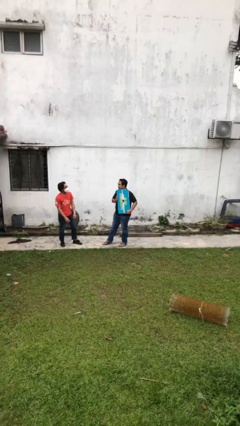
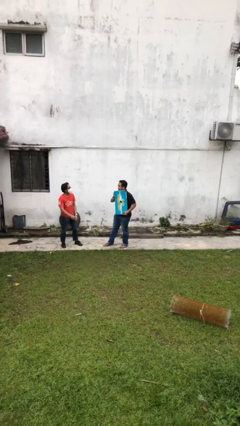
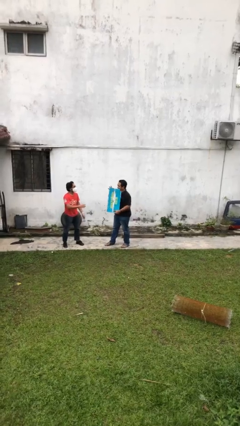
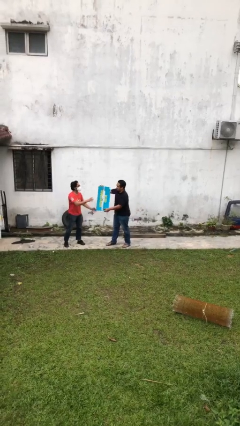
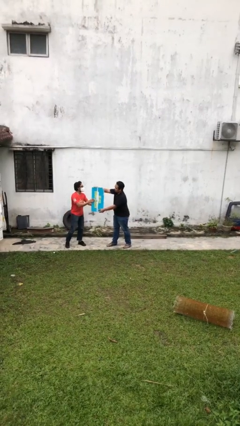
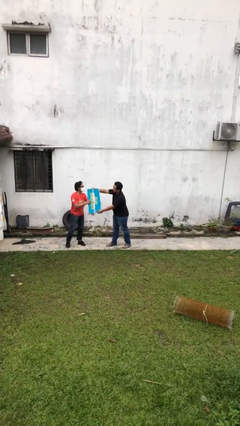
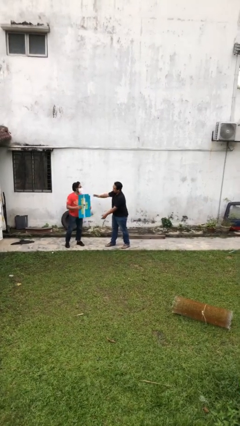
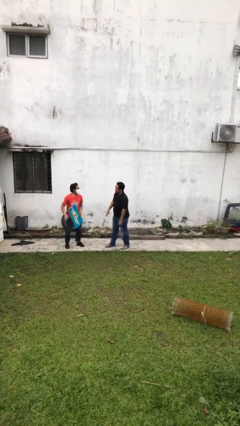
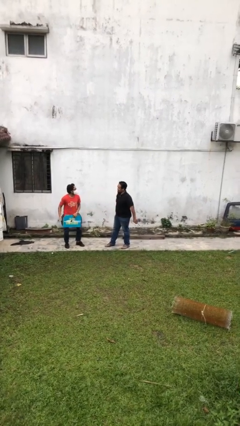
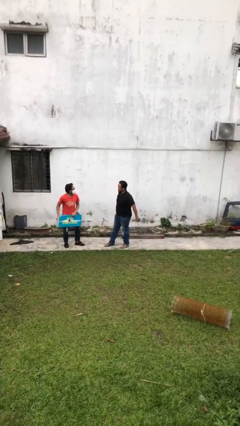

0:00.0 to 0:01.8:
person transfers object to person

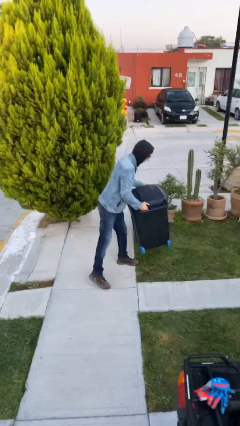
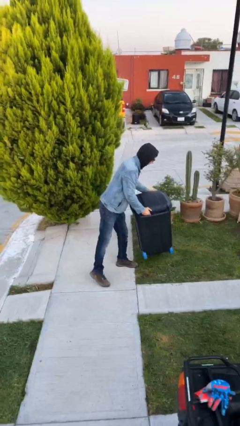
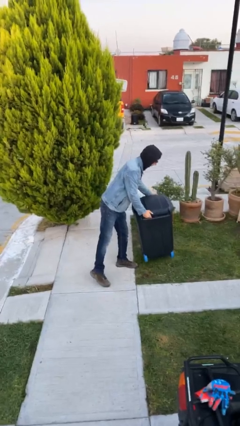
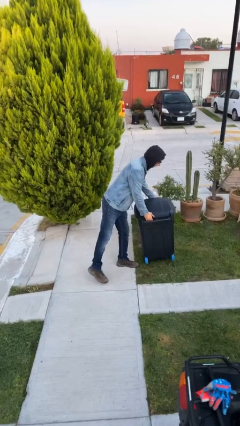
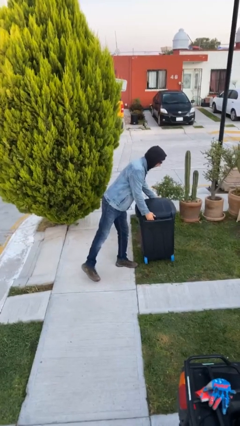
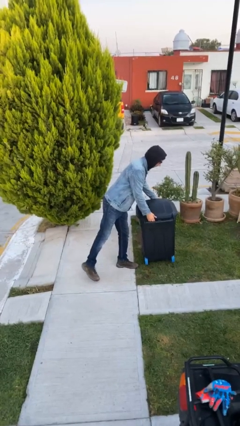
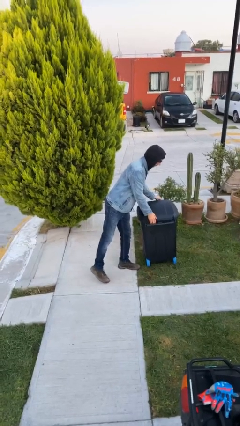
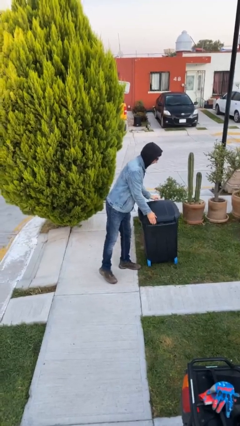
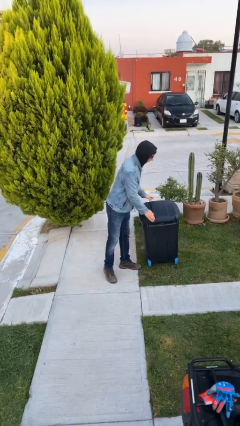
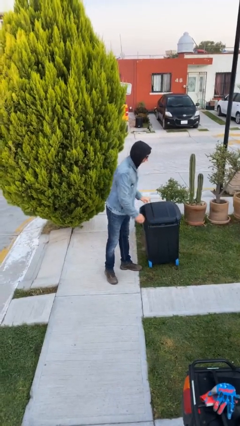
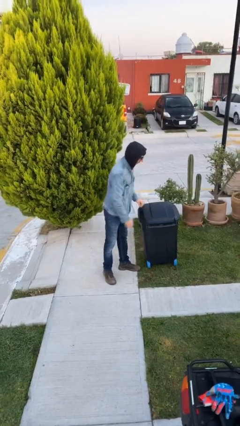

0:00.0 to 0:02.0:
person puts down object on floor

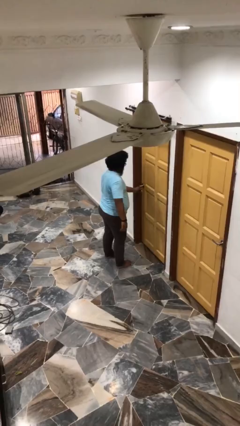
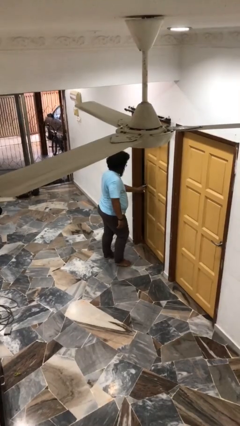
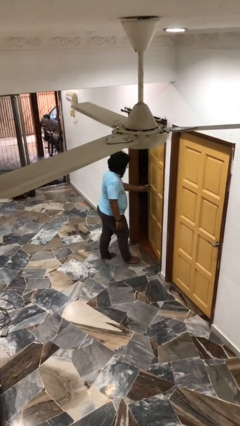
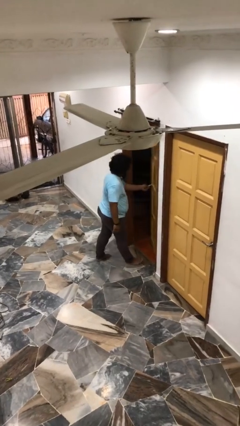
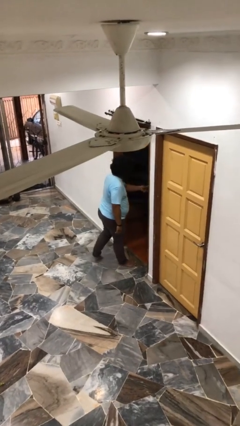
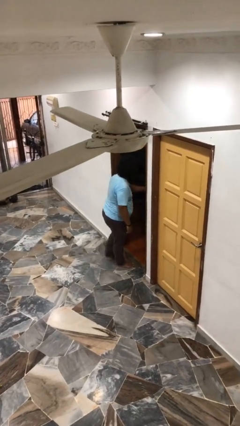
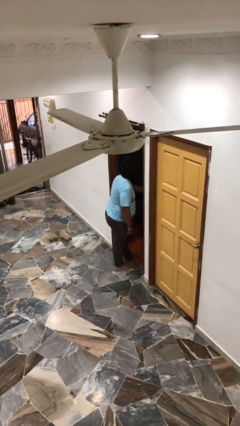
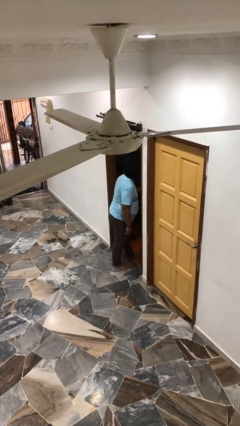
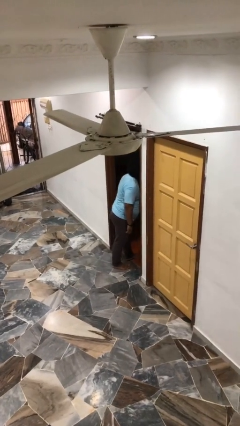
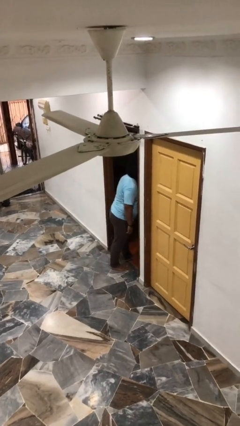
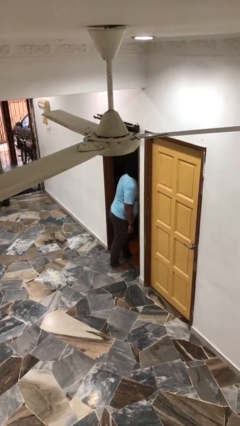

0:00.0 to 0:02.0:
person opens facility door

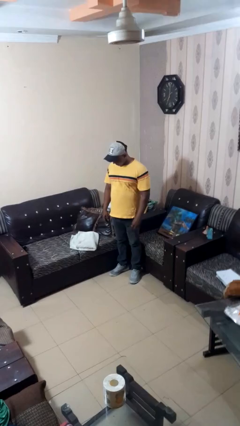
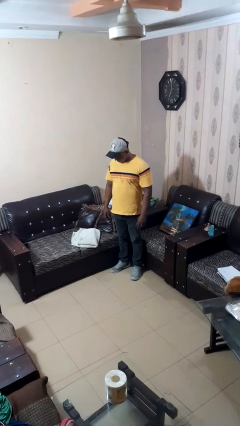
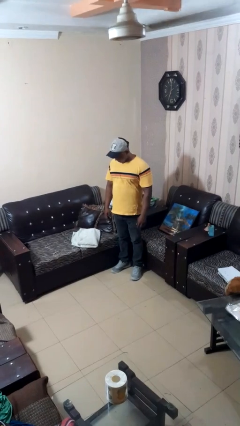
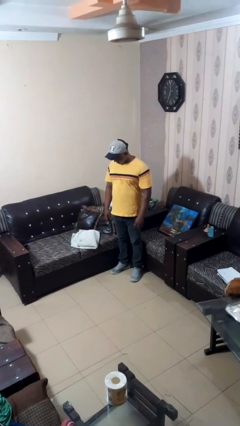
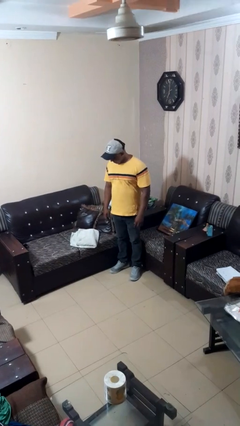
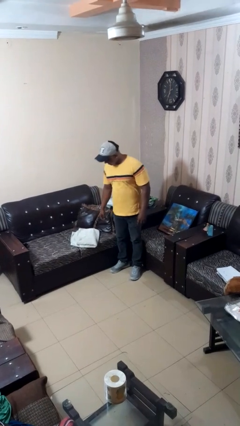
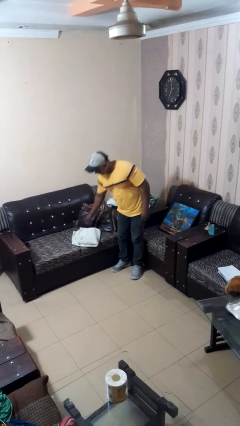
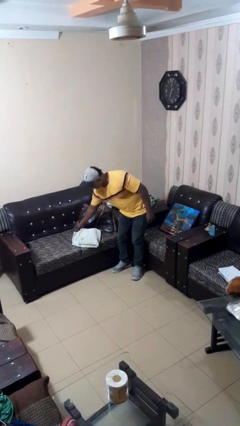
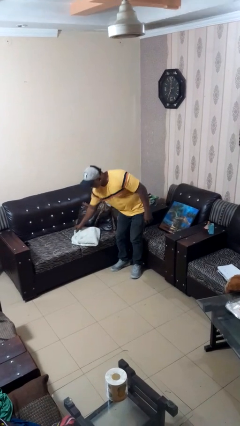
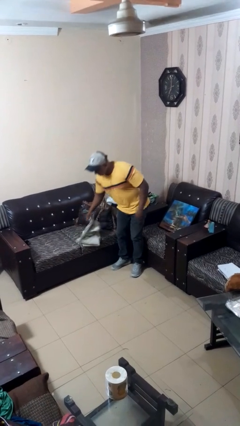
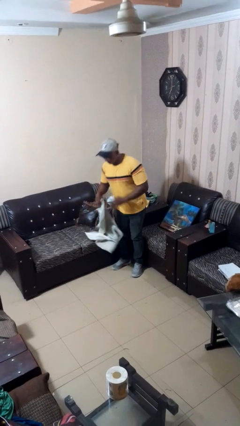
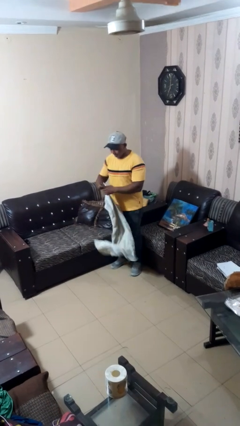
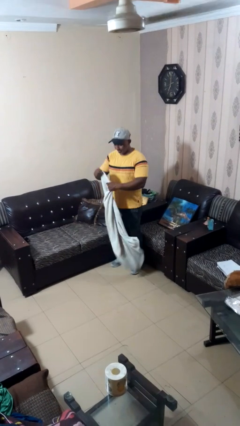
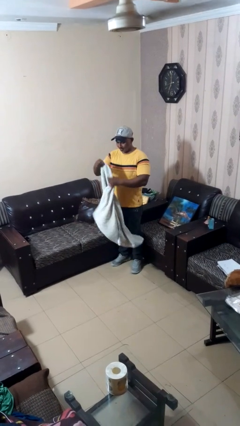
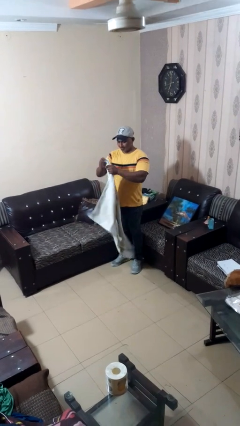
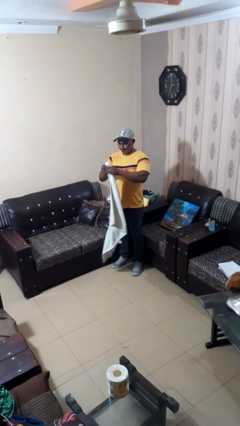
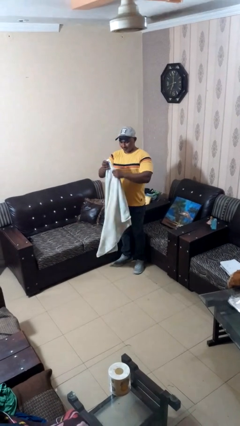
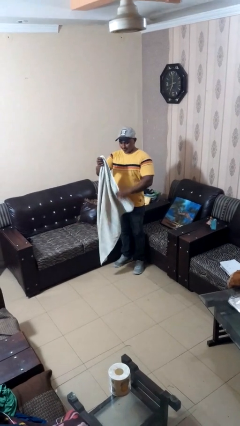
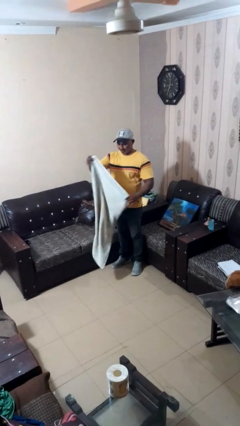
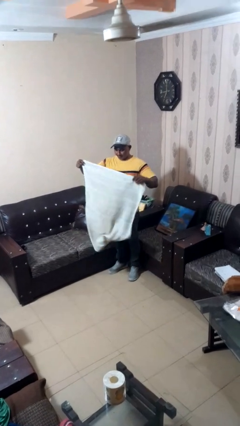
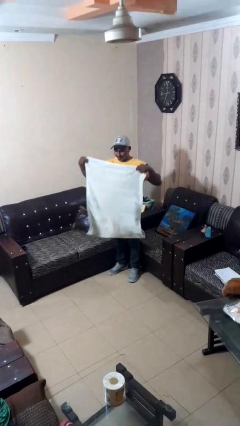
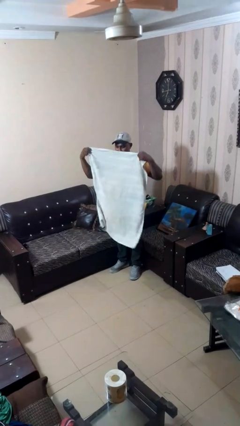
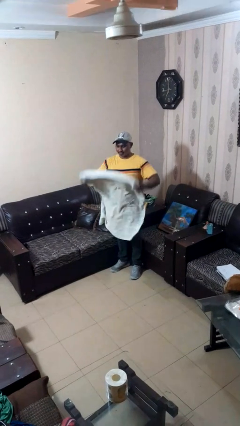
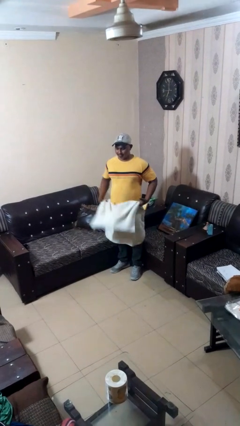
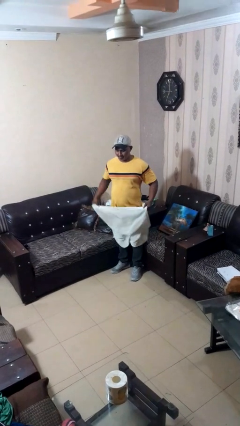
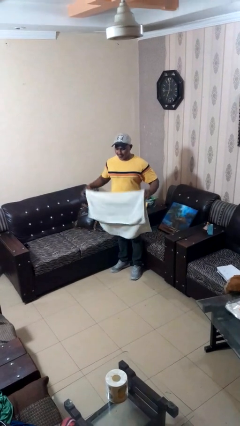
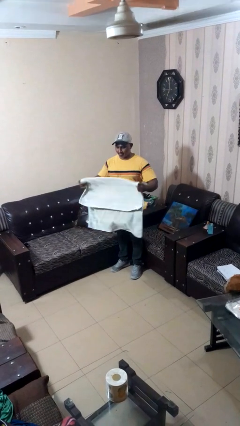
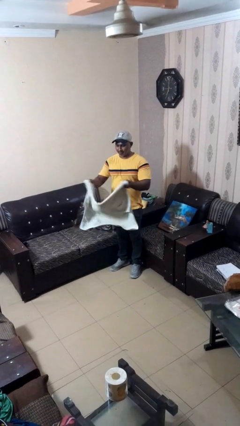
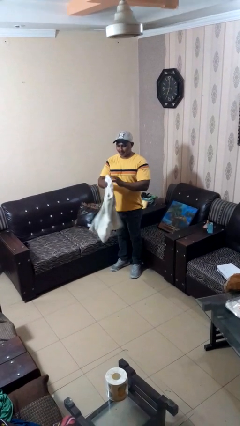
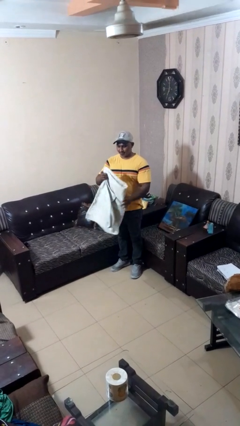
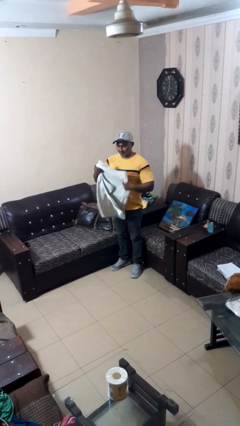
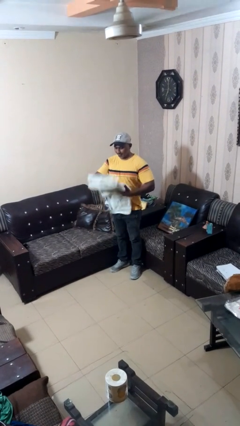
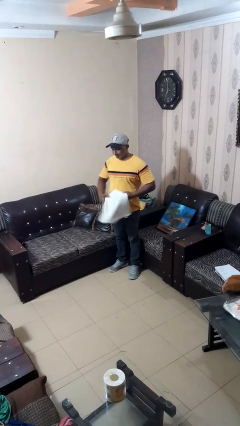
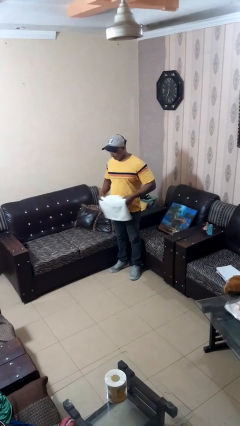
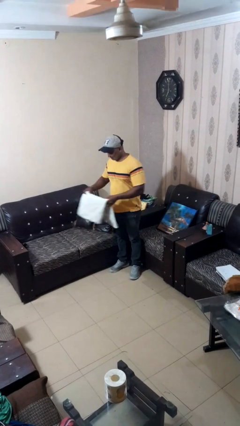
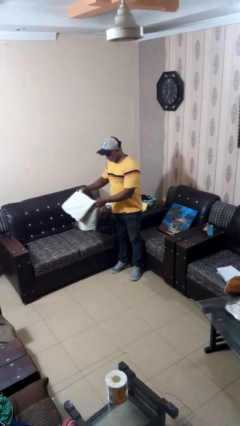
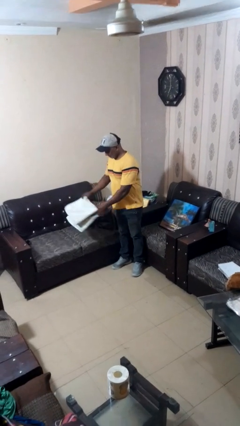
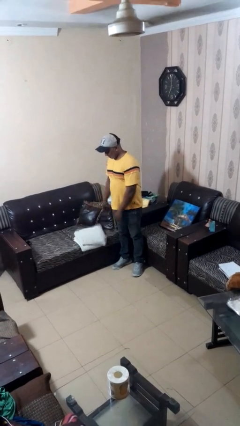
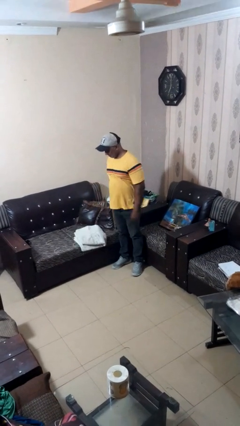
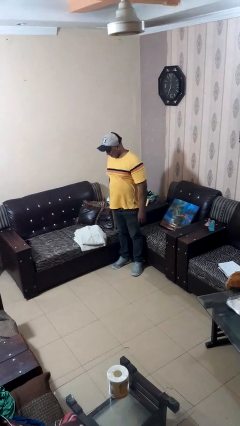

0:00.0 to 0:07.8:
person folds towel

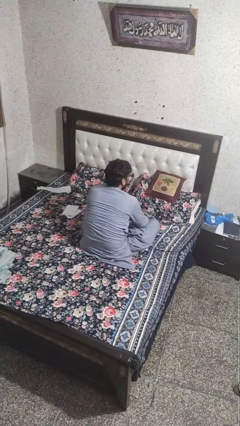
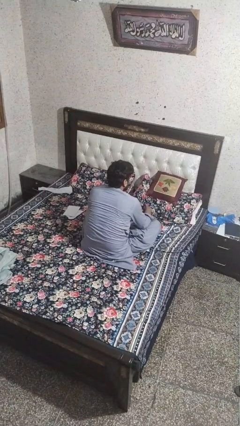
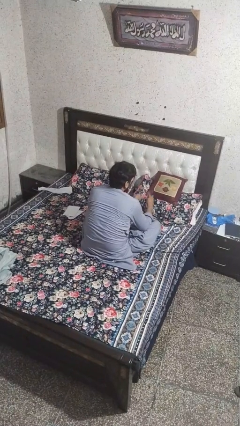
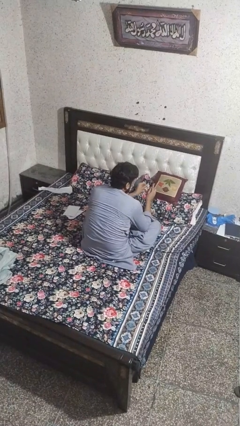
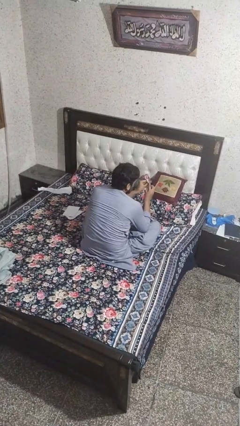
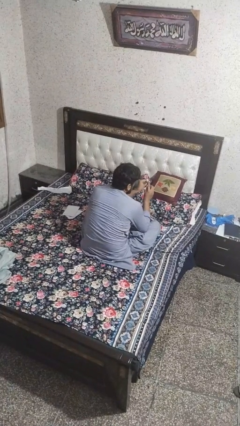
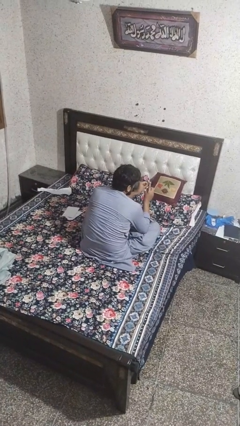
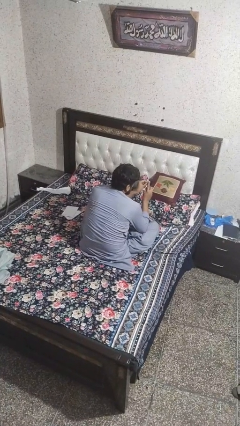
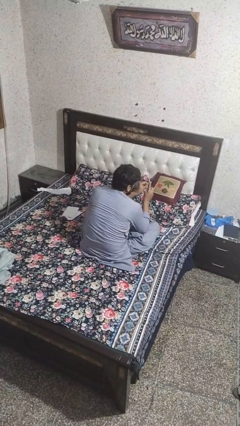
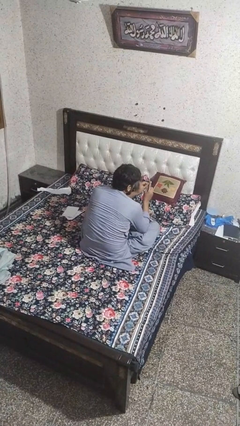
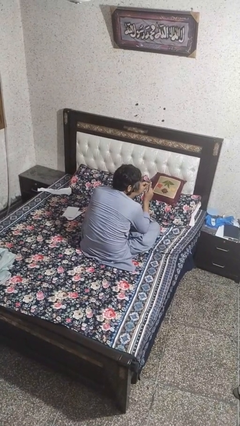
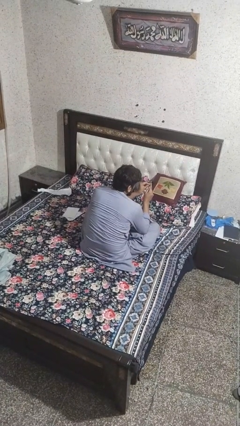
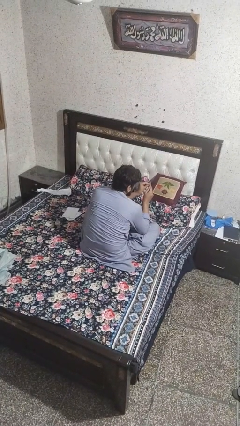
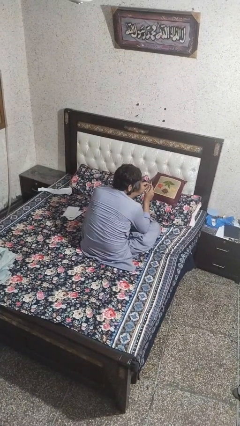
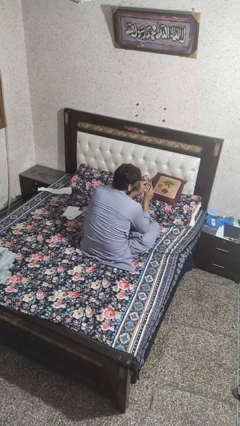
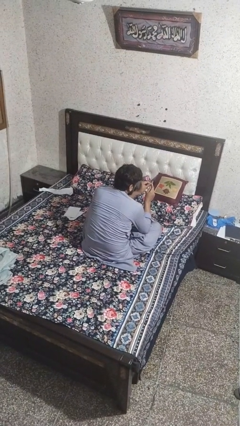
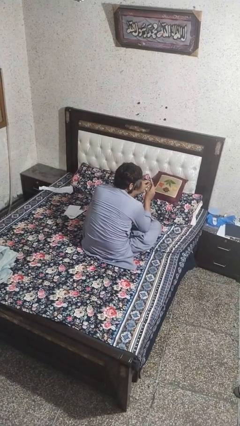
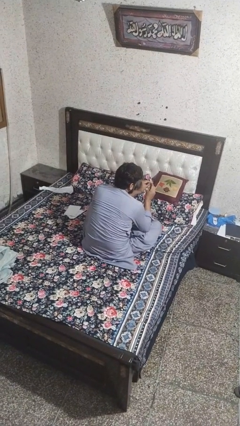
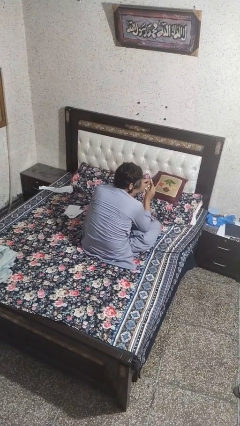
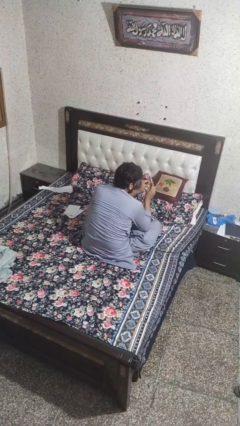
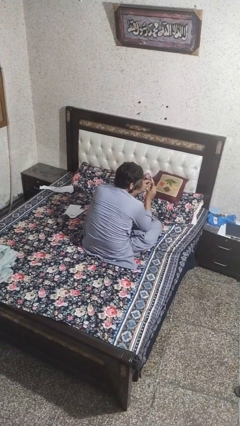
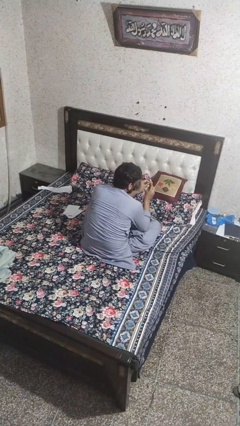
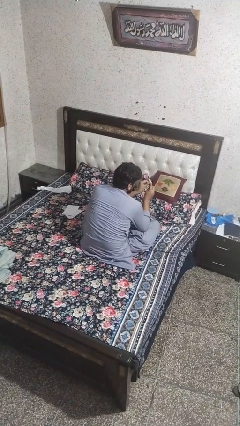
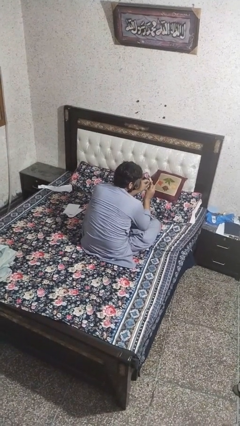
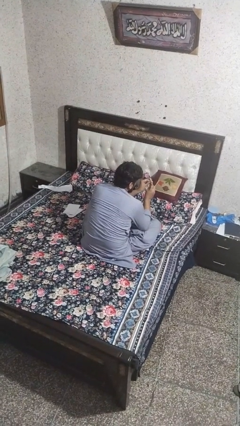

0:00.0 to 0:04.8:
person files fingernails
